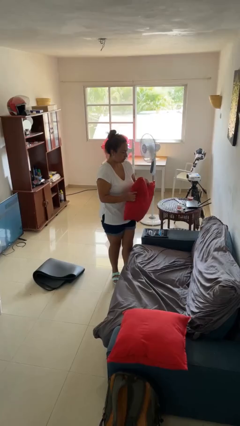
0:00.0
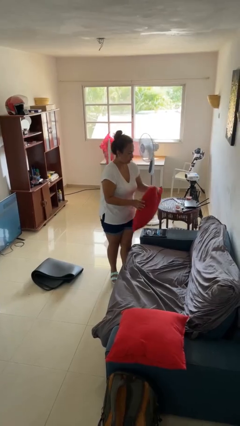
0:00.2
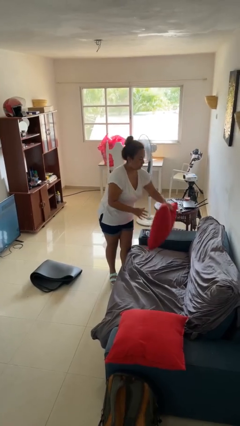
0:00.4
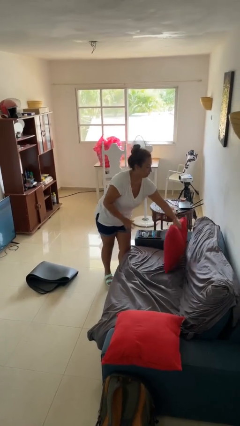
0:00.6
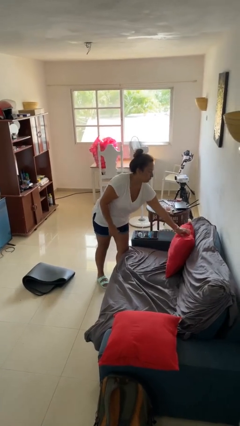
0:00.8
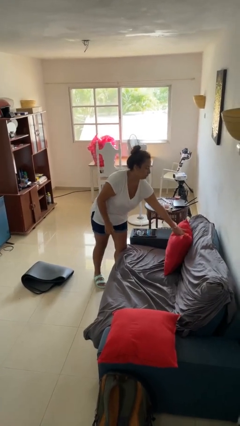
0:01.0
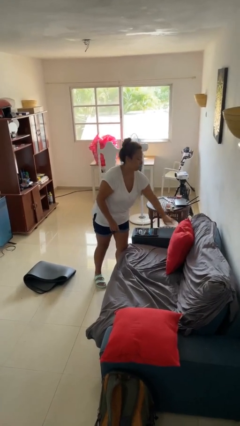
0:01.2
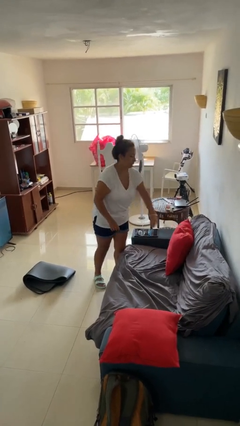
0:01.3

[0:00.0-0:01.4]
person puts down object on couch

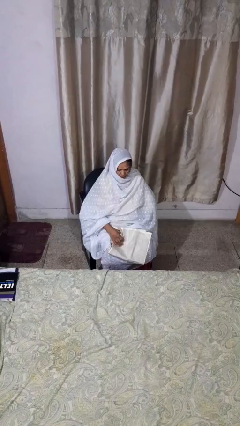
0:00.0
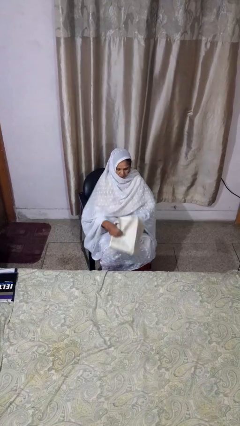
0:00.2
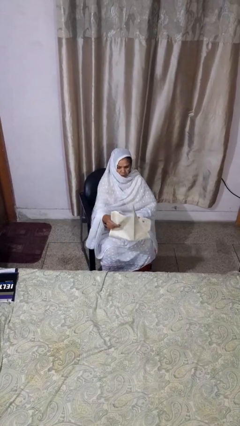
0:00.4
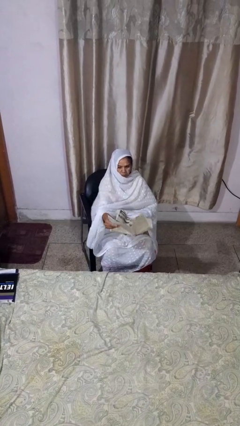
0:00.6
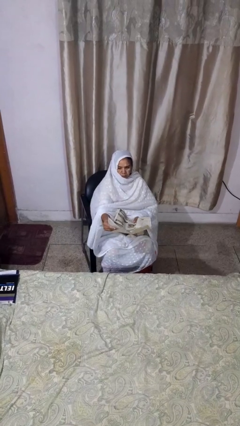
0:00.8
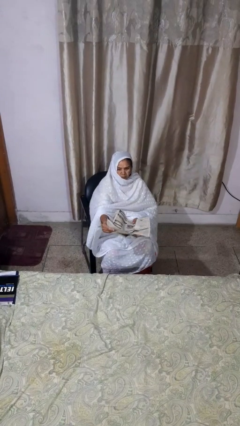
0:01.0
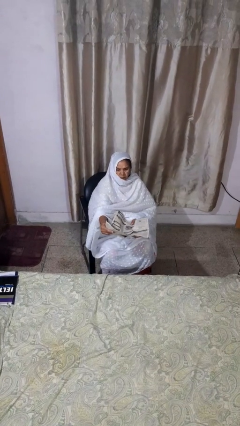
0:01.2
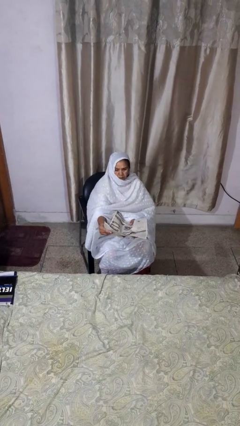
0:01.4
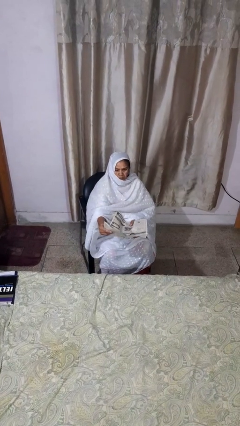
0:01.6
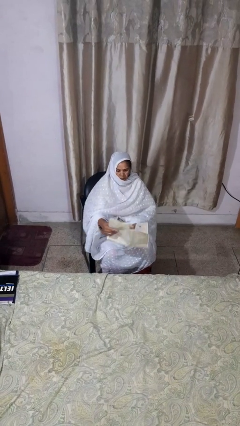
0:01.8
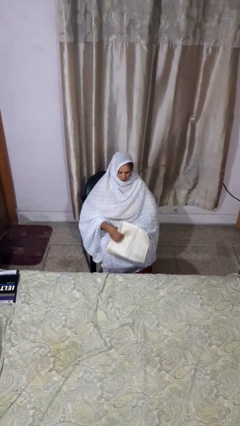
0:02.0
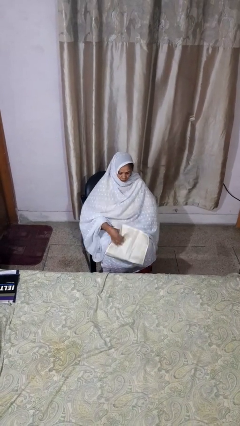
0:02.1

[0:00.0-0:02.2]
person reads newspaper

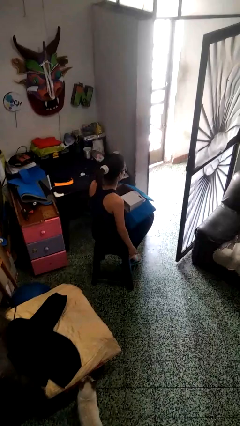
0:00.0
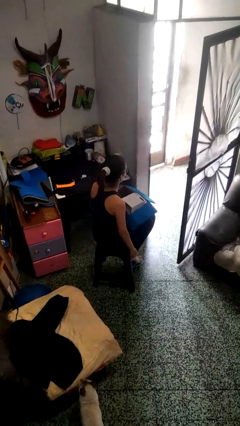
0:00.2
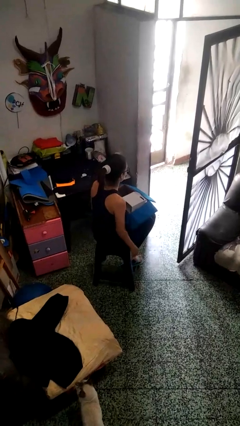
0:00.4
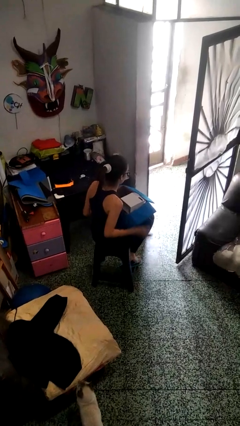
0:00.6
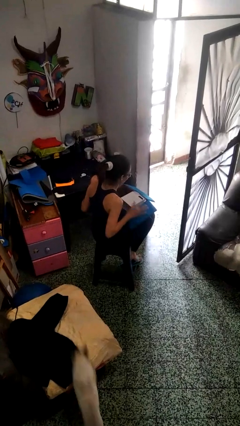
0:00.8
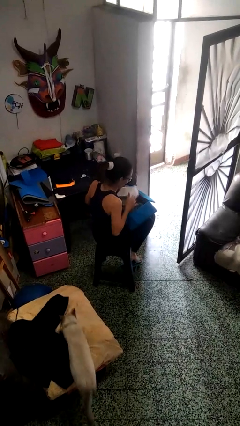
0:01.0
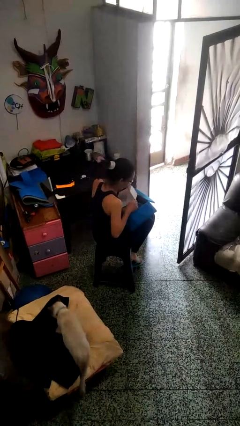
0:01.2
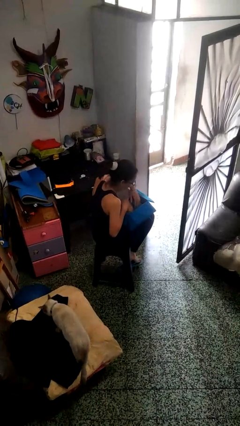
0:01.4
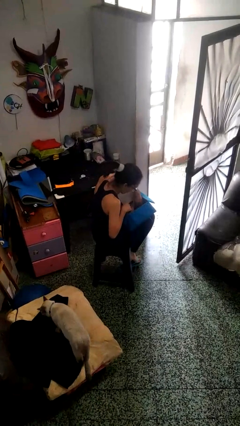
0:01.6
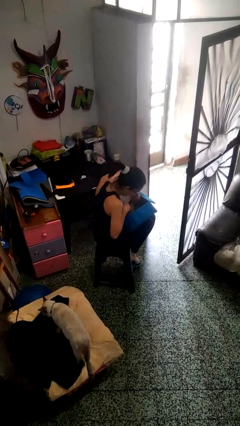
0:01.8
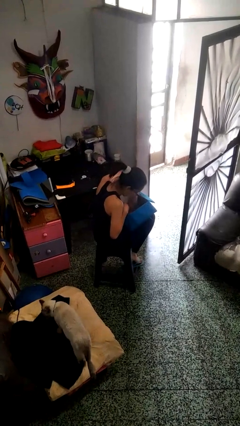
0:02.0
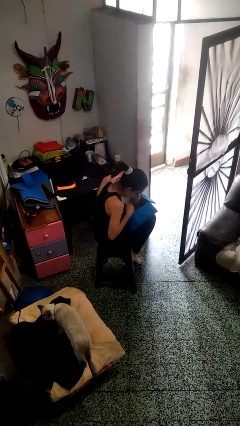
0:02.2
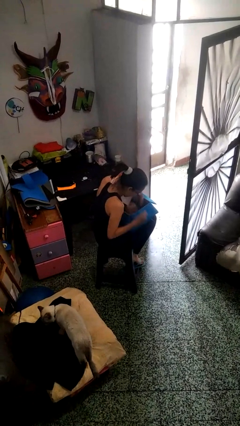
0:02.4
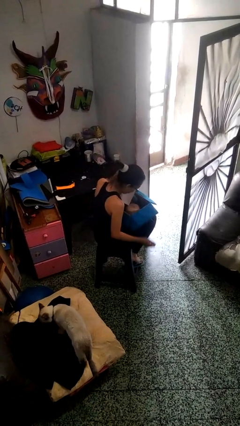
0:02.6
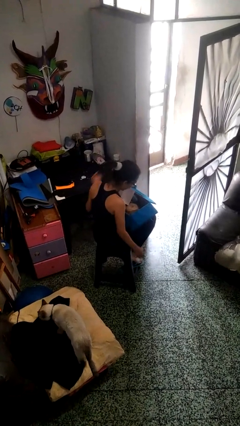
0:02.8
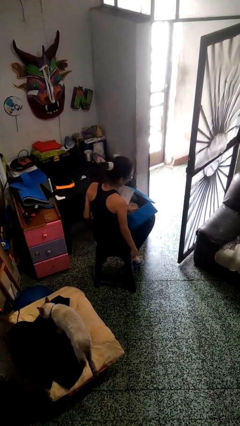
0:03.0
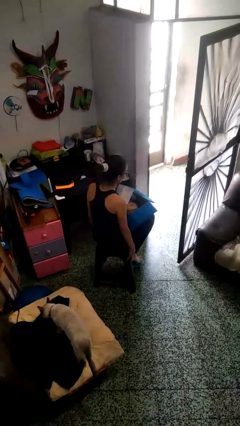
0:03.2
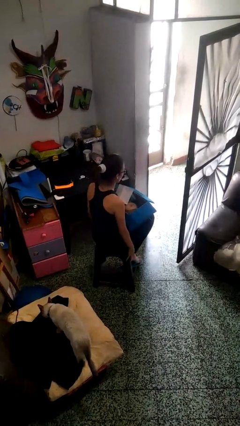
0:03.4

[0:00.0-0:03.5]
person searches in box

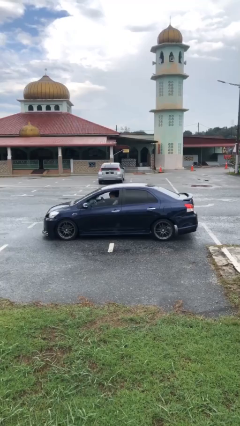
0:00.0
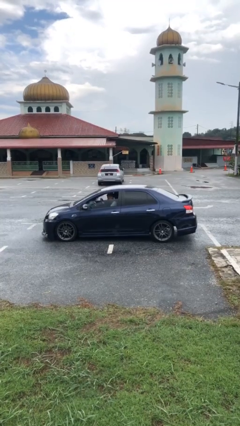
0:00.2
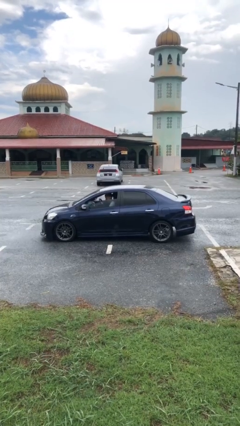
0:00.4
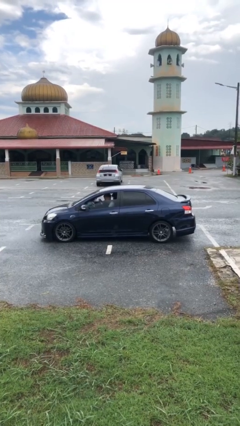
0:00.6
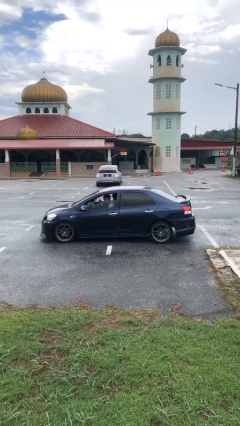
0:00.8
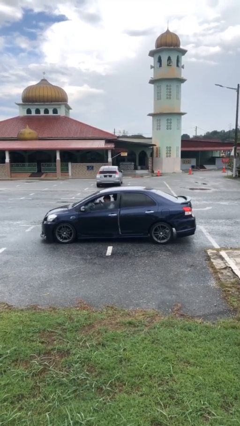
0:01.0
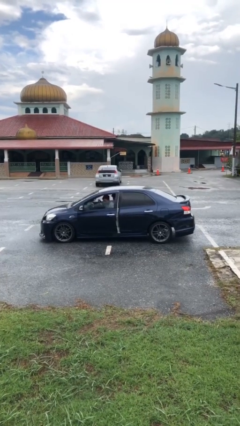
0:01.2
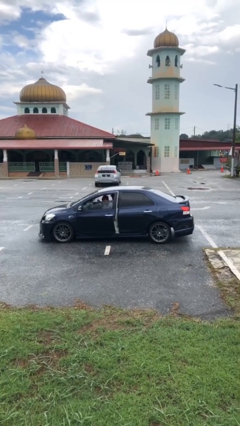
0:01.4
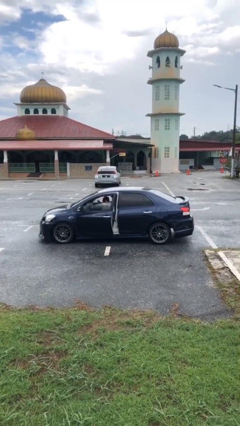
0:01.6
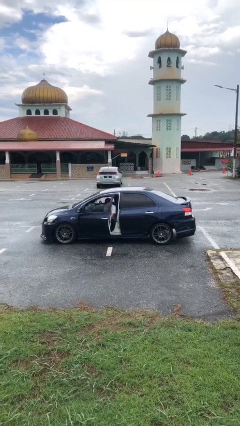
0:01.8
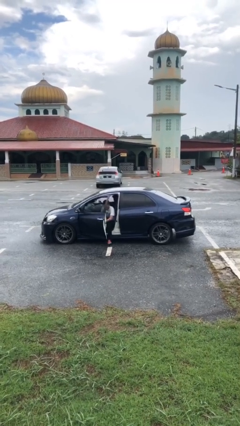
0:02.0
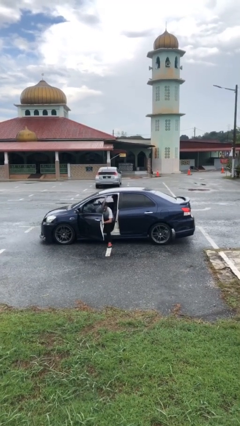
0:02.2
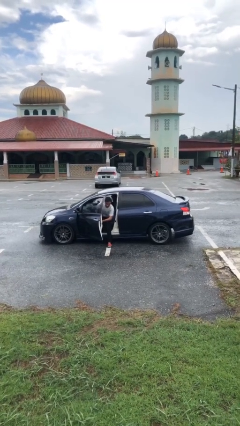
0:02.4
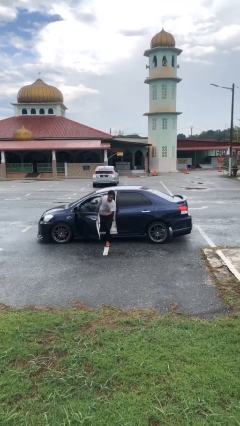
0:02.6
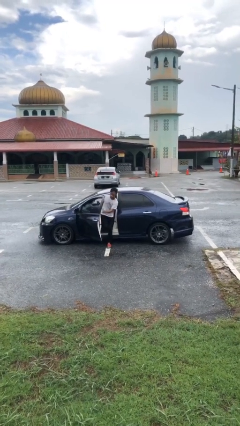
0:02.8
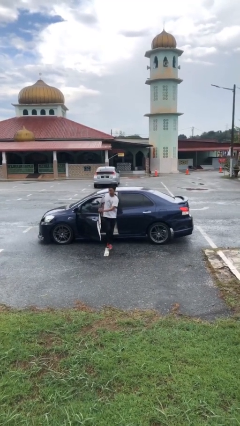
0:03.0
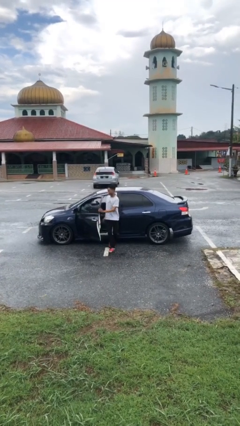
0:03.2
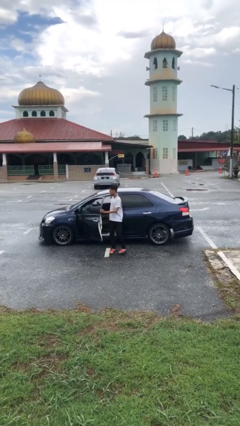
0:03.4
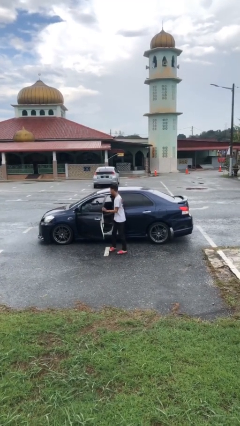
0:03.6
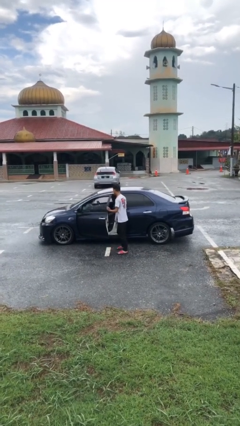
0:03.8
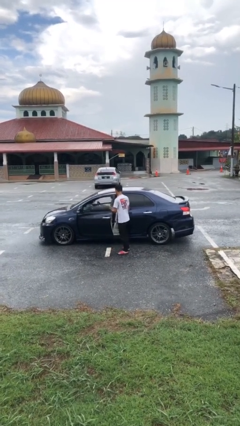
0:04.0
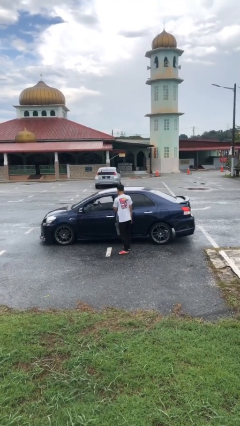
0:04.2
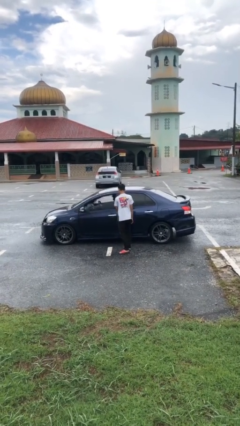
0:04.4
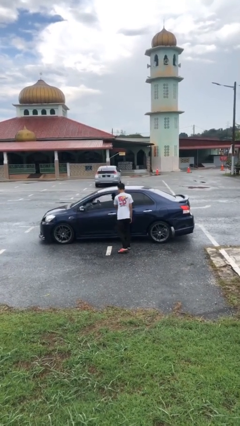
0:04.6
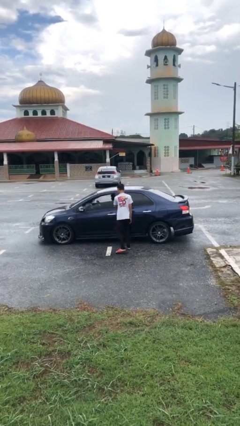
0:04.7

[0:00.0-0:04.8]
car drops off person

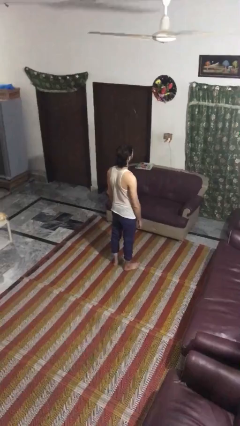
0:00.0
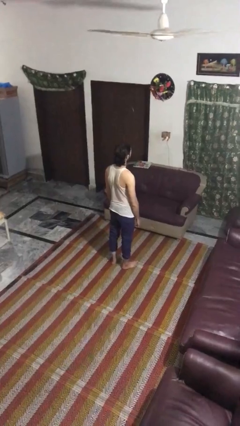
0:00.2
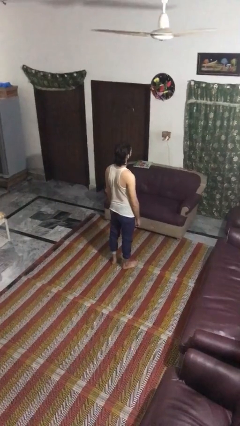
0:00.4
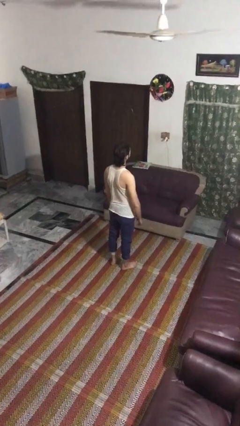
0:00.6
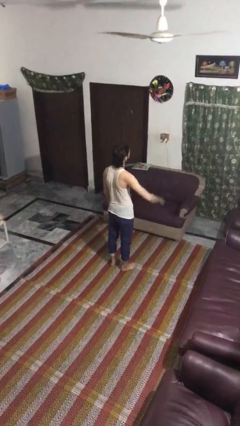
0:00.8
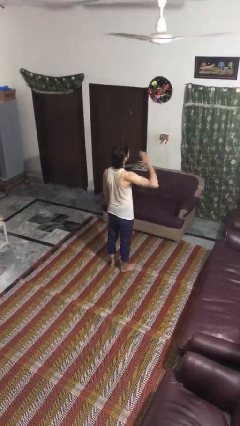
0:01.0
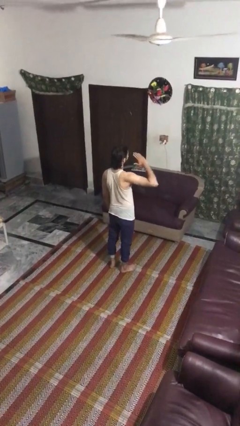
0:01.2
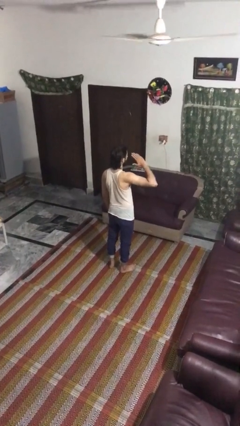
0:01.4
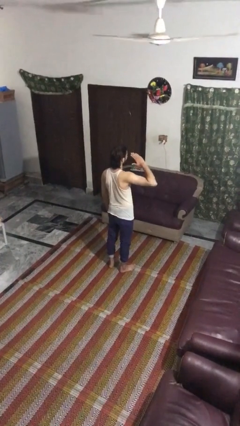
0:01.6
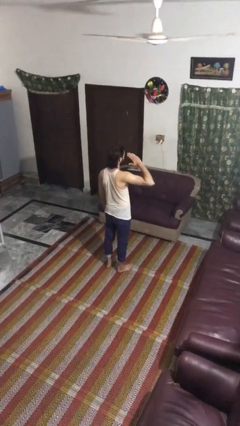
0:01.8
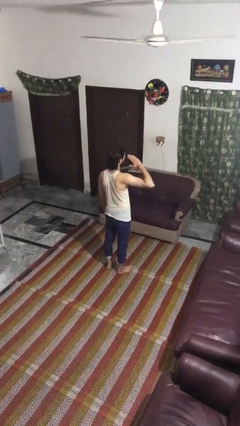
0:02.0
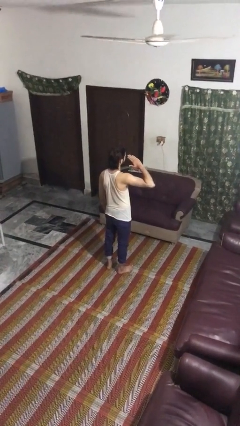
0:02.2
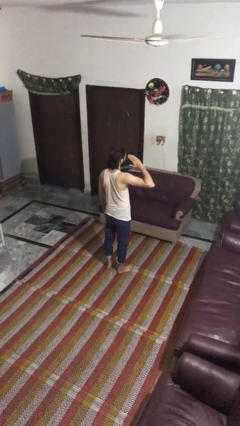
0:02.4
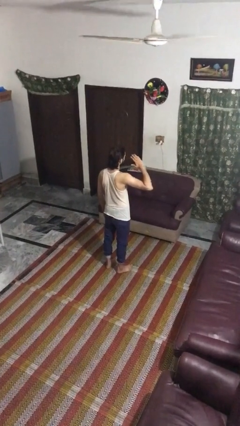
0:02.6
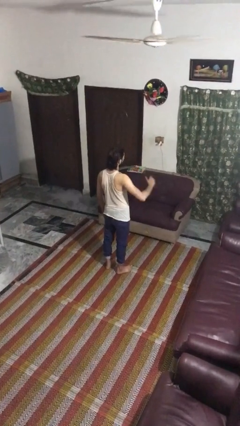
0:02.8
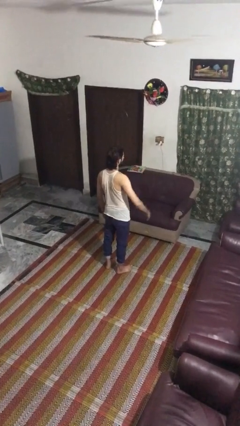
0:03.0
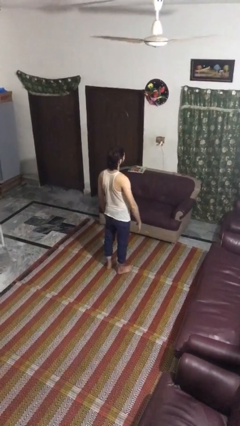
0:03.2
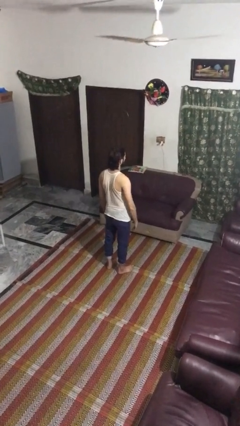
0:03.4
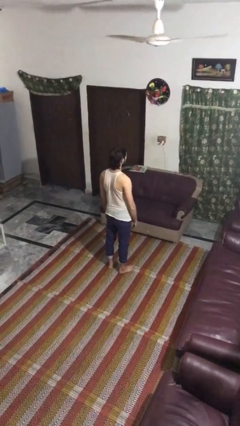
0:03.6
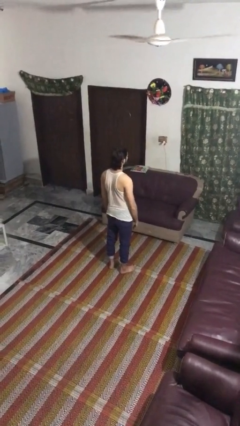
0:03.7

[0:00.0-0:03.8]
person salutes

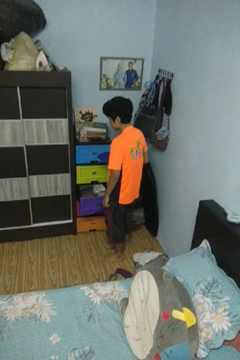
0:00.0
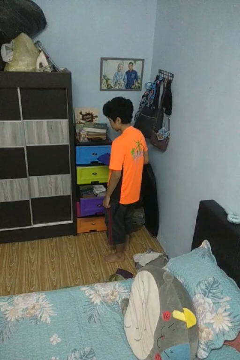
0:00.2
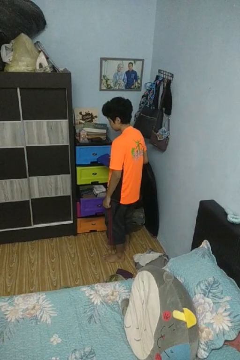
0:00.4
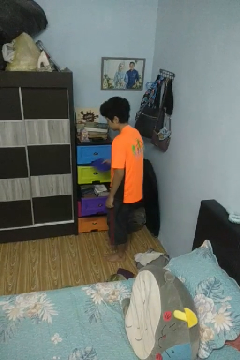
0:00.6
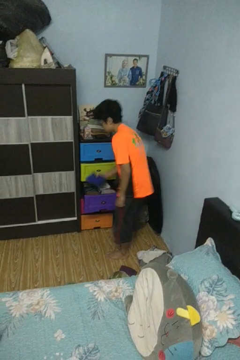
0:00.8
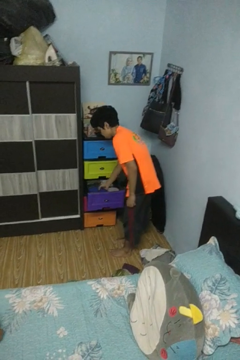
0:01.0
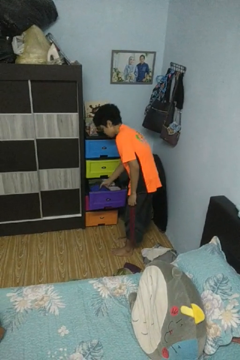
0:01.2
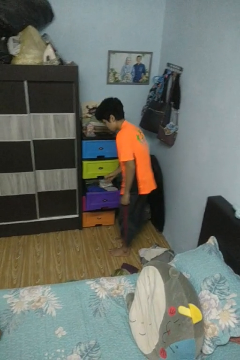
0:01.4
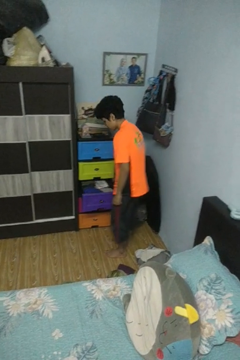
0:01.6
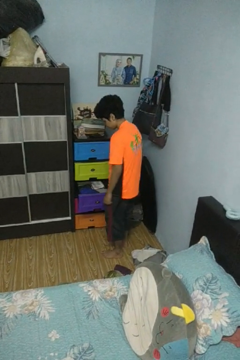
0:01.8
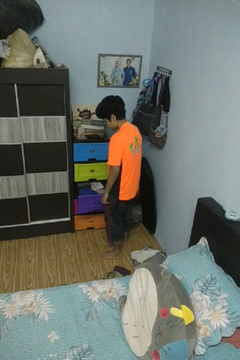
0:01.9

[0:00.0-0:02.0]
person puts clothes into dresser
